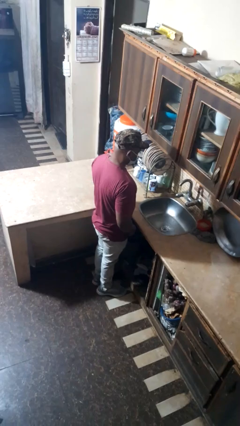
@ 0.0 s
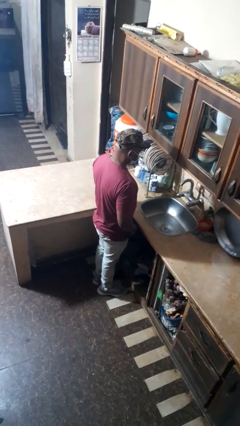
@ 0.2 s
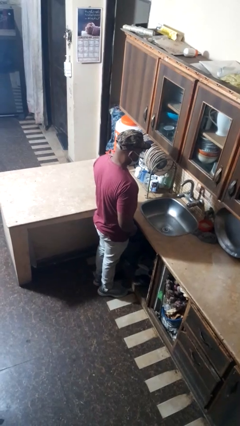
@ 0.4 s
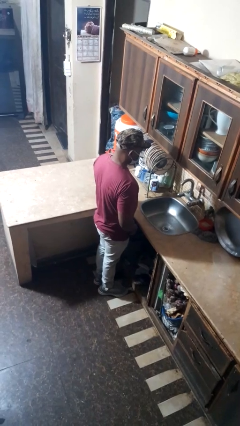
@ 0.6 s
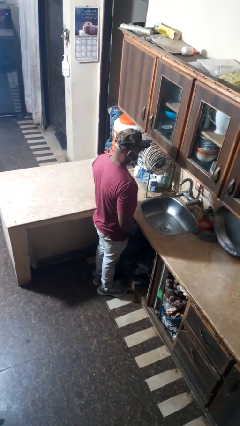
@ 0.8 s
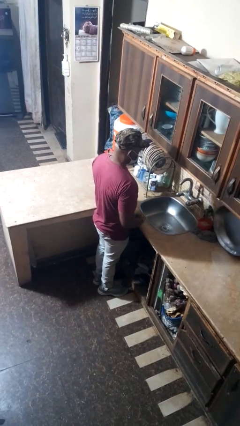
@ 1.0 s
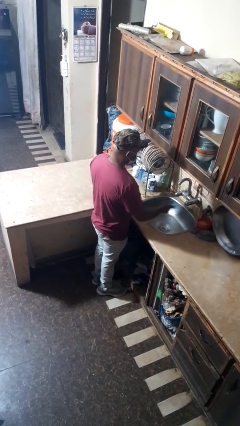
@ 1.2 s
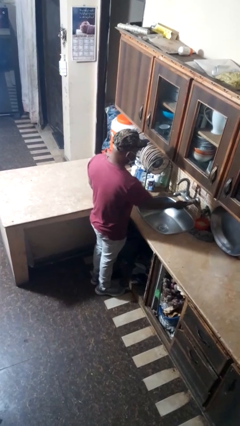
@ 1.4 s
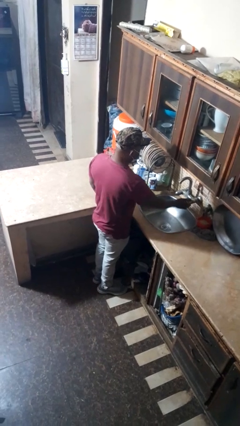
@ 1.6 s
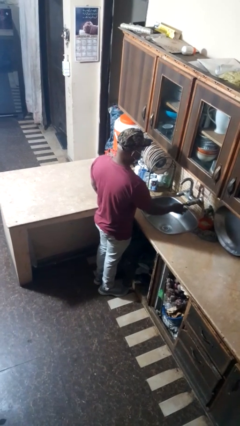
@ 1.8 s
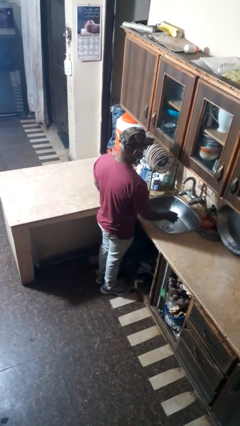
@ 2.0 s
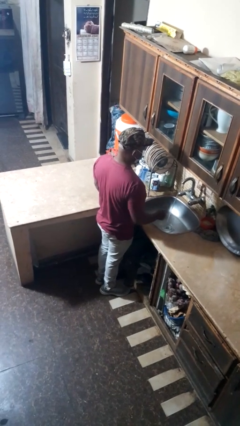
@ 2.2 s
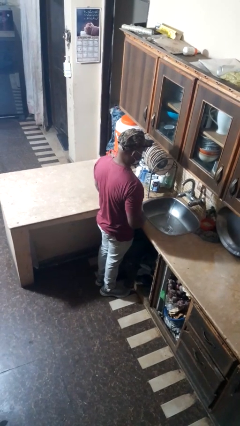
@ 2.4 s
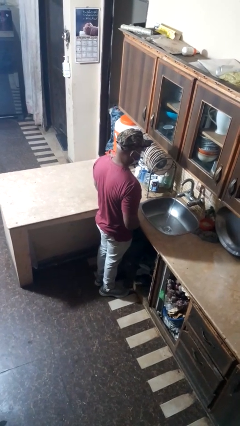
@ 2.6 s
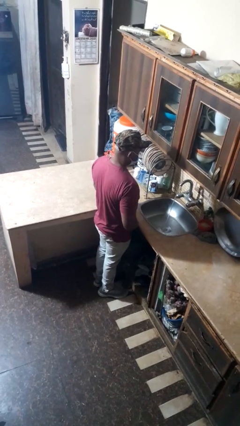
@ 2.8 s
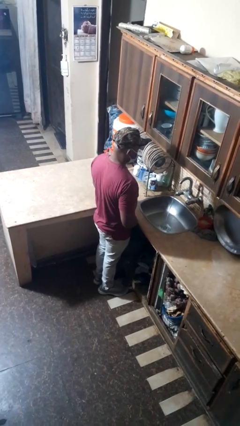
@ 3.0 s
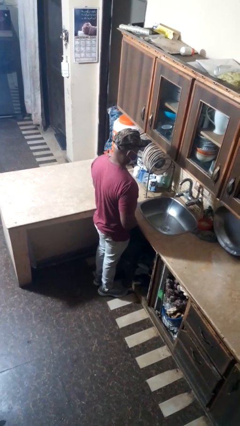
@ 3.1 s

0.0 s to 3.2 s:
person turns on faucet

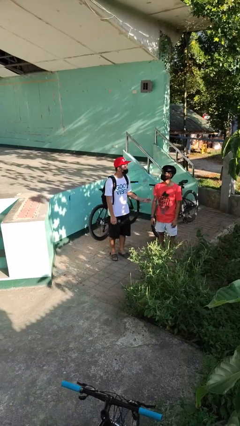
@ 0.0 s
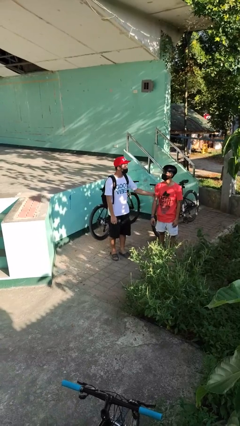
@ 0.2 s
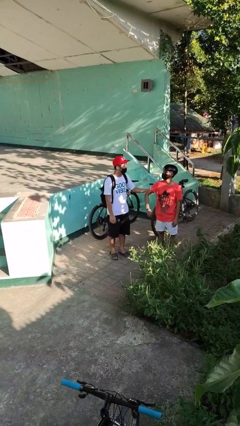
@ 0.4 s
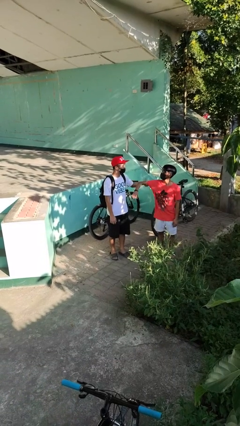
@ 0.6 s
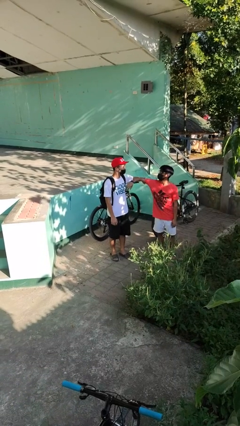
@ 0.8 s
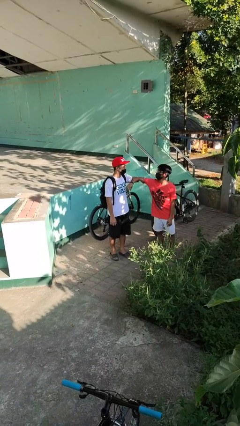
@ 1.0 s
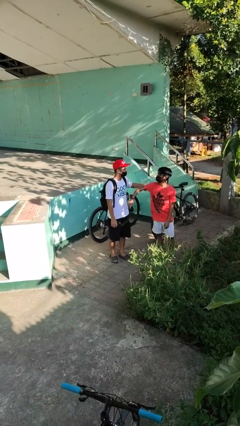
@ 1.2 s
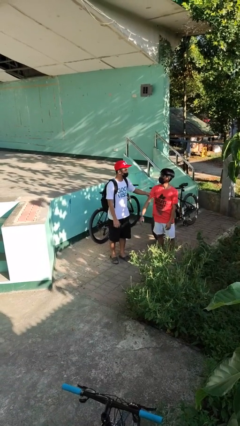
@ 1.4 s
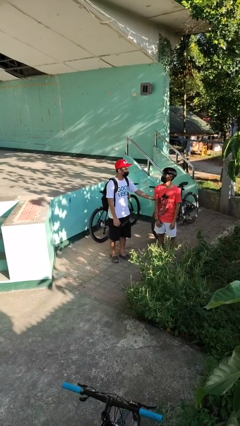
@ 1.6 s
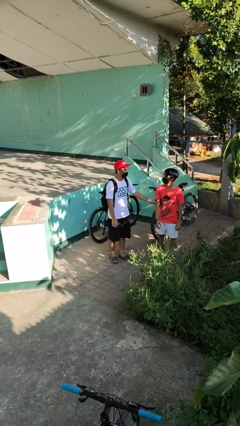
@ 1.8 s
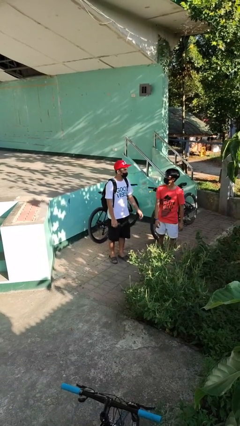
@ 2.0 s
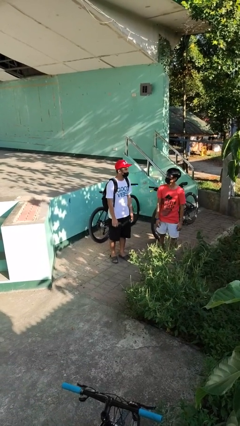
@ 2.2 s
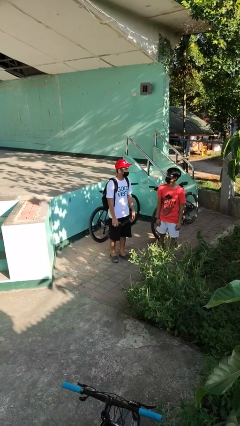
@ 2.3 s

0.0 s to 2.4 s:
person grabs person by bicep

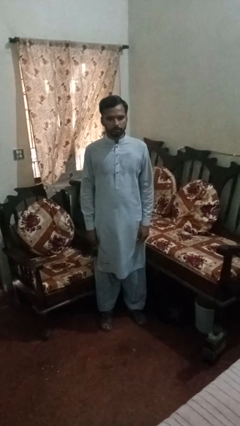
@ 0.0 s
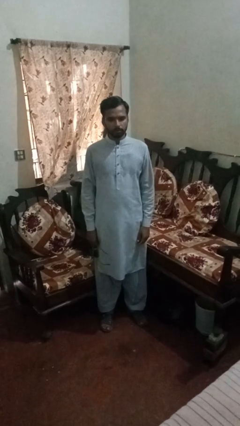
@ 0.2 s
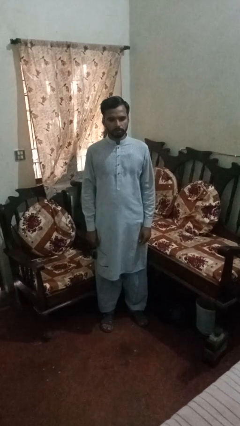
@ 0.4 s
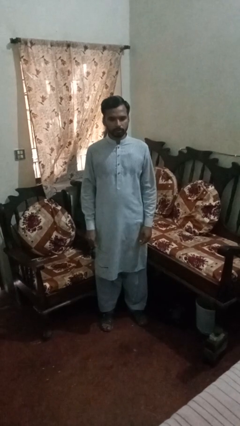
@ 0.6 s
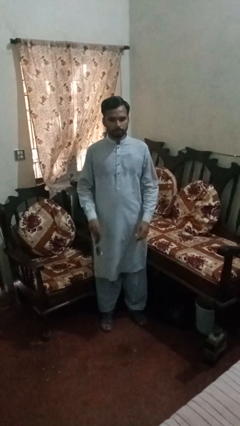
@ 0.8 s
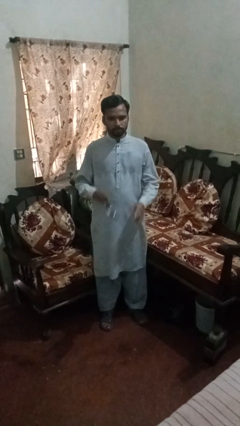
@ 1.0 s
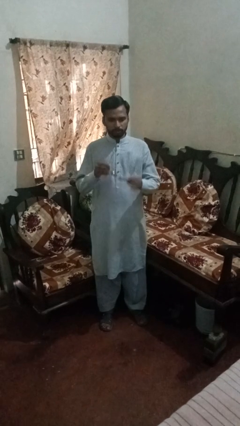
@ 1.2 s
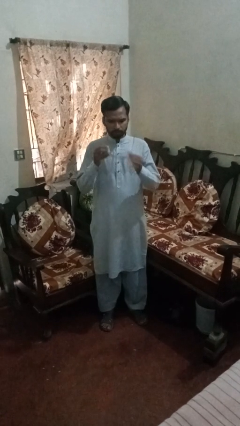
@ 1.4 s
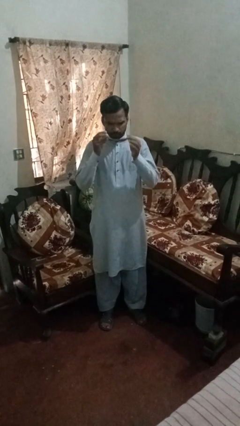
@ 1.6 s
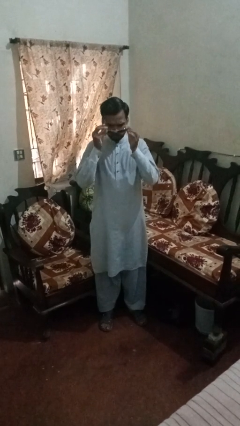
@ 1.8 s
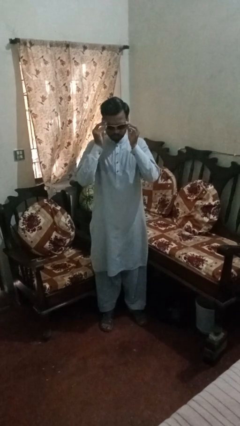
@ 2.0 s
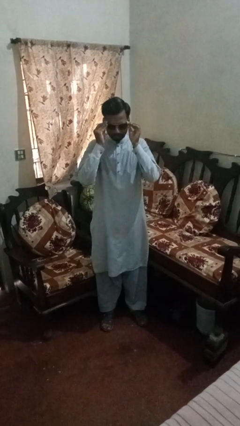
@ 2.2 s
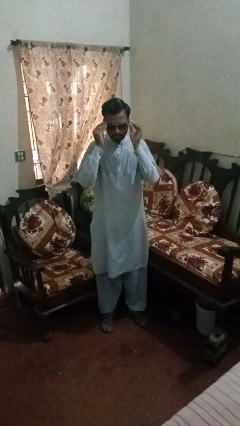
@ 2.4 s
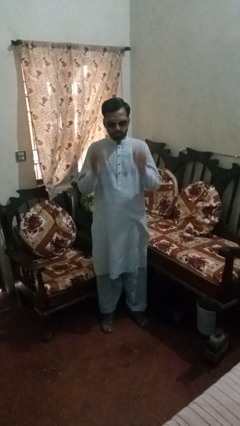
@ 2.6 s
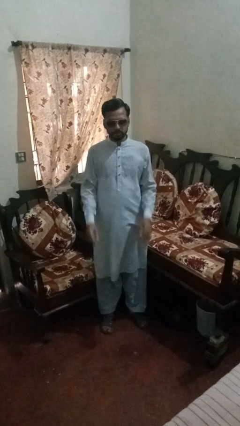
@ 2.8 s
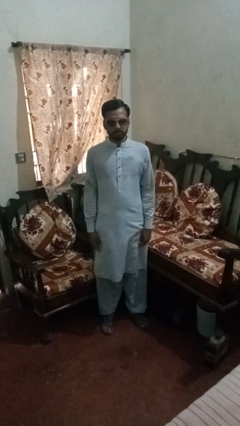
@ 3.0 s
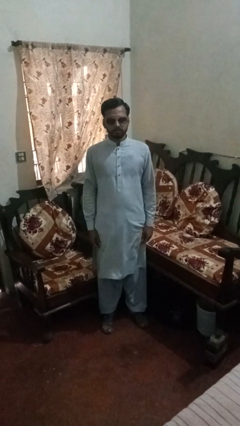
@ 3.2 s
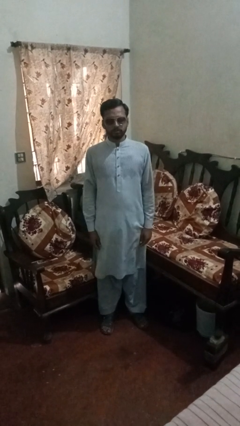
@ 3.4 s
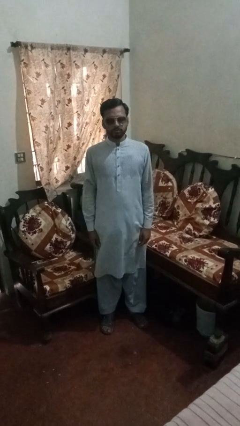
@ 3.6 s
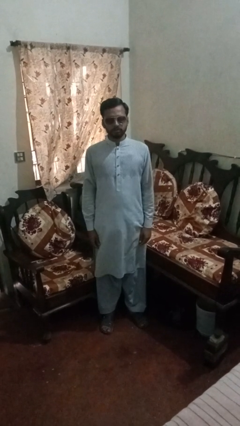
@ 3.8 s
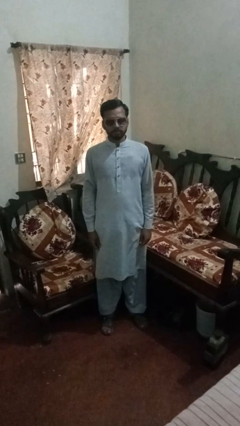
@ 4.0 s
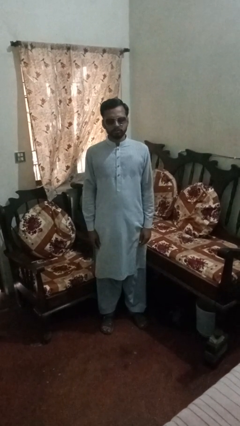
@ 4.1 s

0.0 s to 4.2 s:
person puts on sunglasses

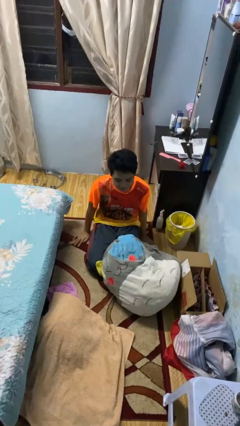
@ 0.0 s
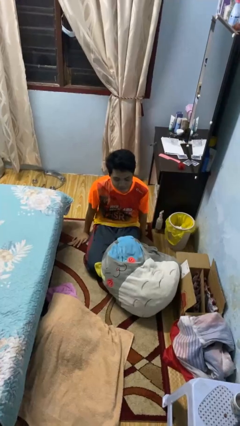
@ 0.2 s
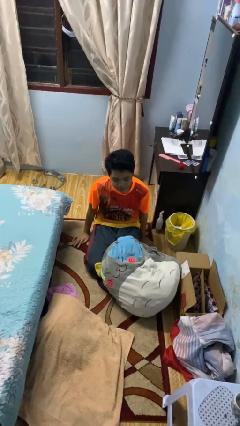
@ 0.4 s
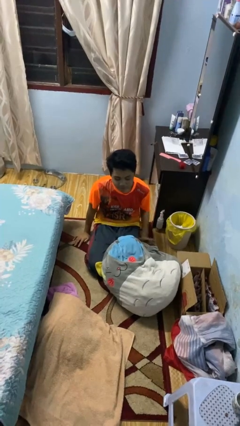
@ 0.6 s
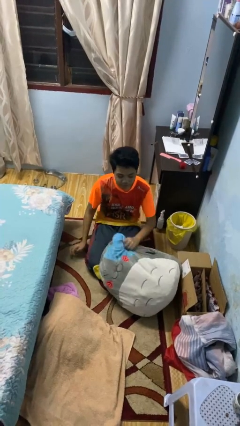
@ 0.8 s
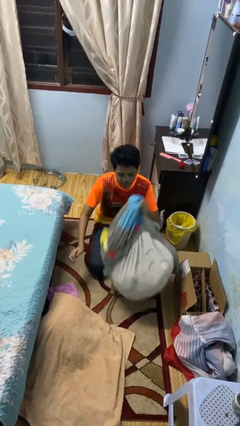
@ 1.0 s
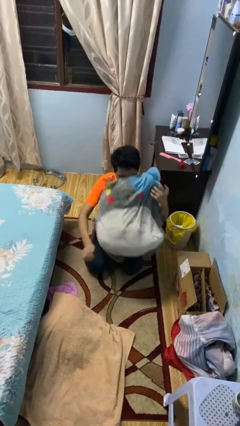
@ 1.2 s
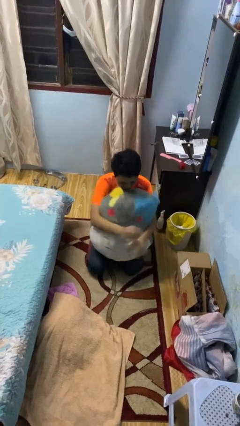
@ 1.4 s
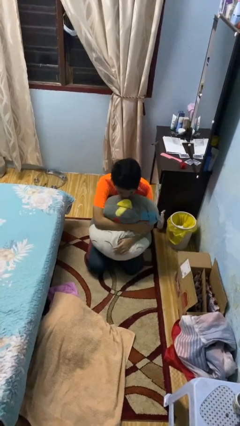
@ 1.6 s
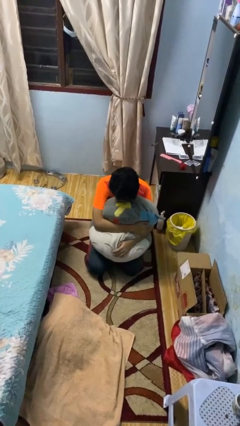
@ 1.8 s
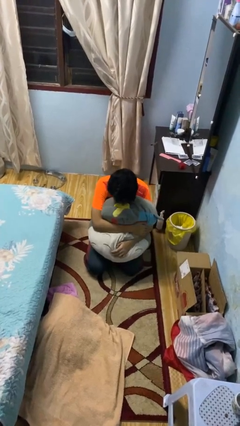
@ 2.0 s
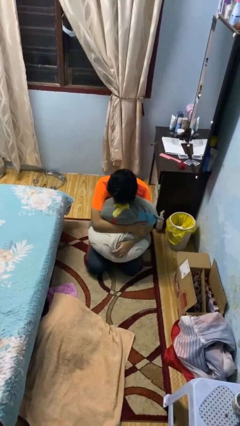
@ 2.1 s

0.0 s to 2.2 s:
person hugs stuffed animal

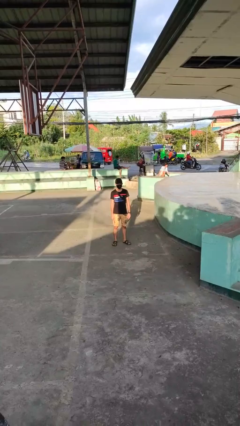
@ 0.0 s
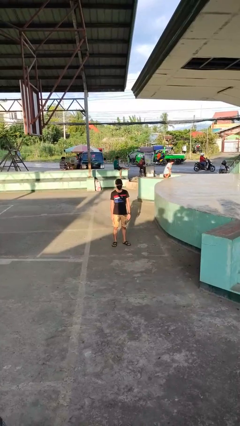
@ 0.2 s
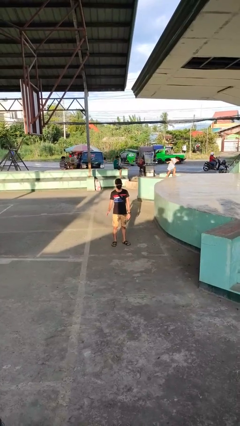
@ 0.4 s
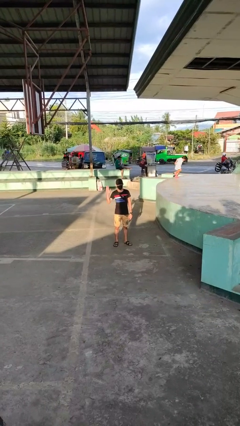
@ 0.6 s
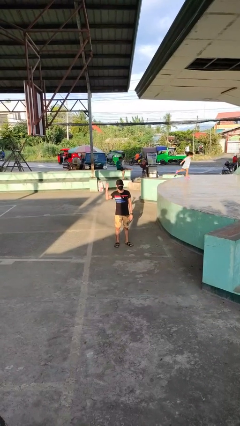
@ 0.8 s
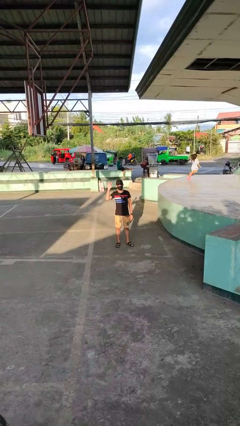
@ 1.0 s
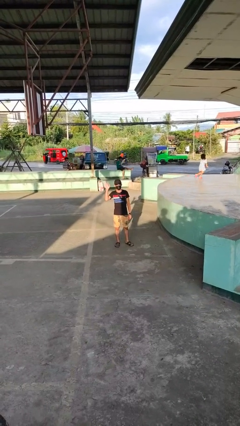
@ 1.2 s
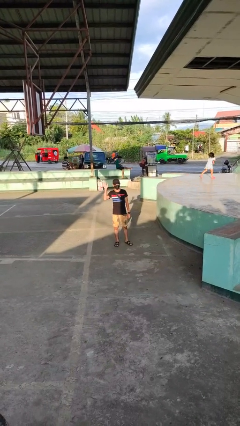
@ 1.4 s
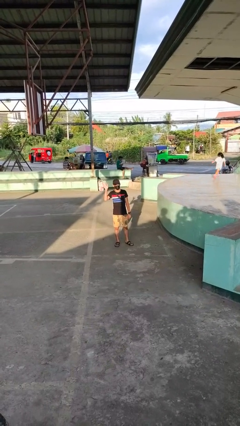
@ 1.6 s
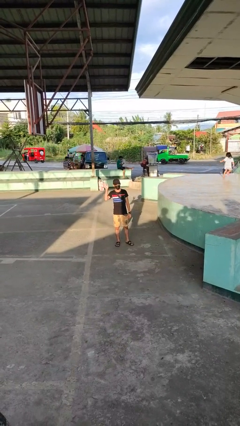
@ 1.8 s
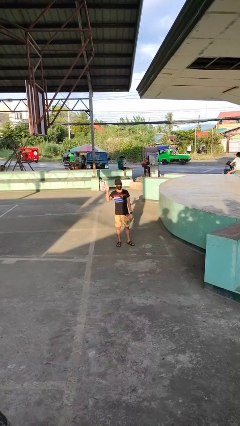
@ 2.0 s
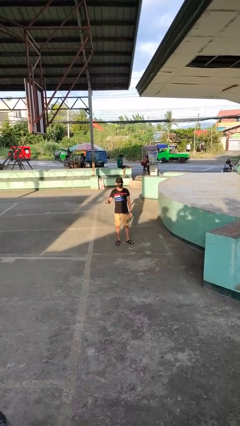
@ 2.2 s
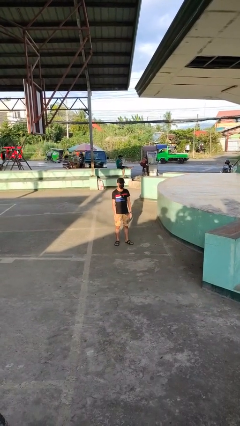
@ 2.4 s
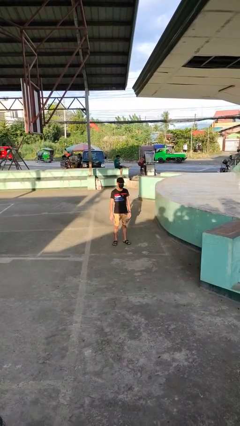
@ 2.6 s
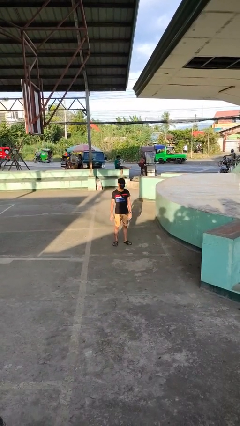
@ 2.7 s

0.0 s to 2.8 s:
person waves at person

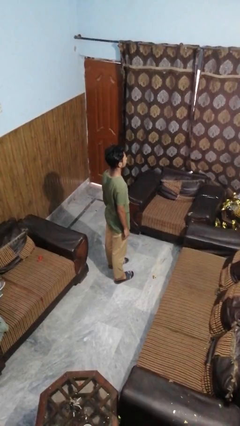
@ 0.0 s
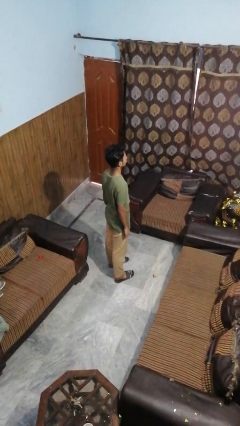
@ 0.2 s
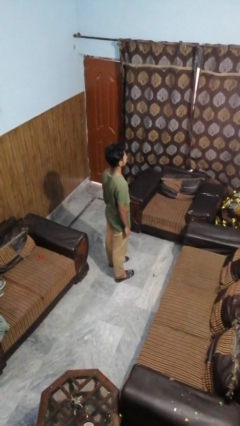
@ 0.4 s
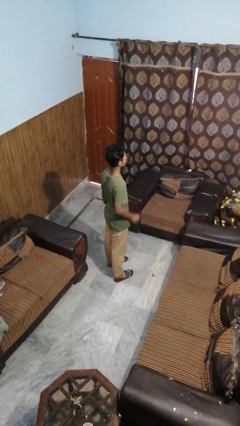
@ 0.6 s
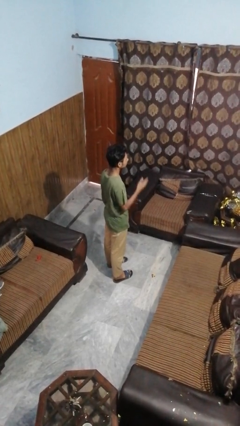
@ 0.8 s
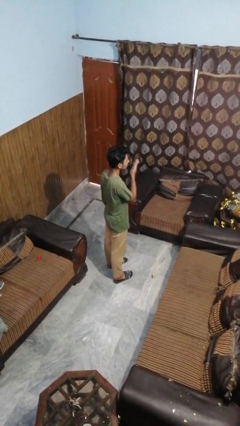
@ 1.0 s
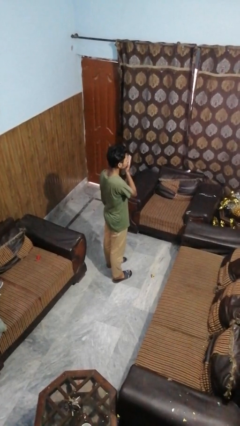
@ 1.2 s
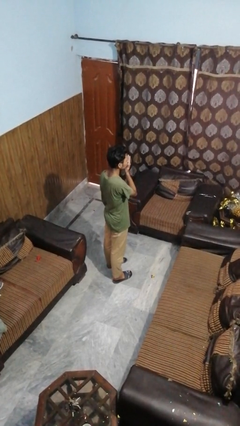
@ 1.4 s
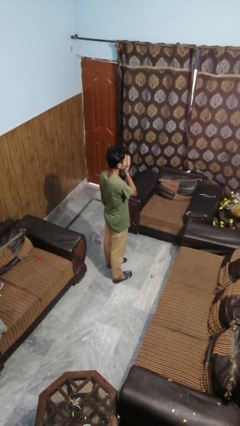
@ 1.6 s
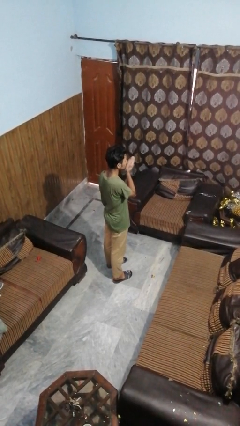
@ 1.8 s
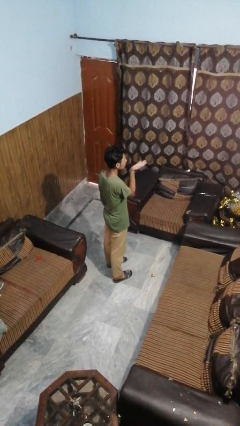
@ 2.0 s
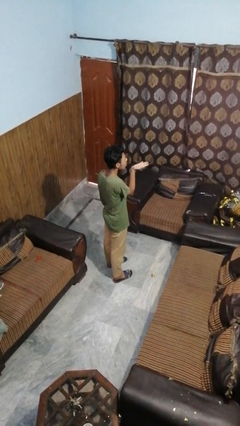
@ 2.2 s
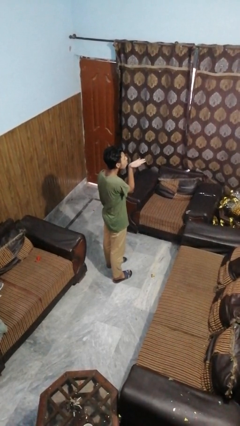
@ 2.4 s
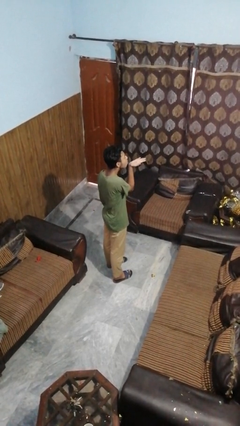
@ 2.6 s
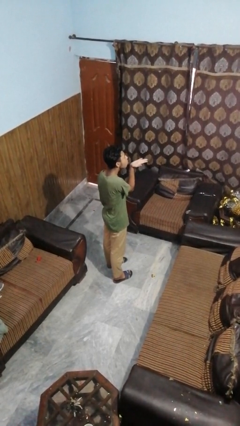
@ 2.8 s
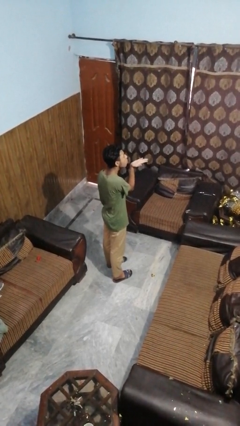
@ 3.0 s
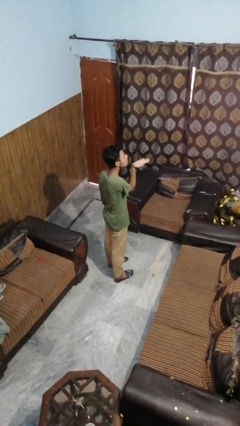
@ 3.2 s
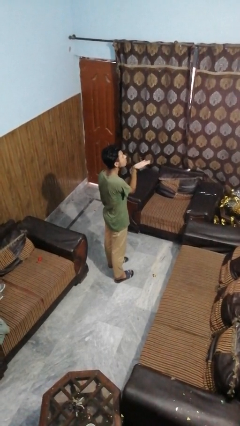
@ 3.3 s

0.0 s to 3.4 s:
person gestures blow kiss
